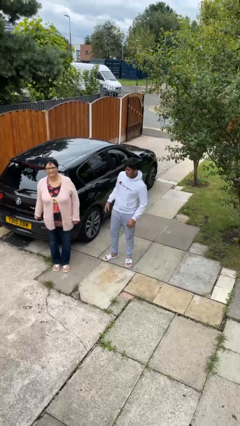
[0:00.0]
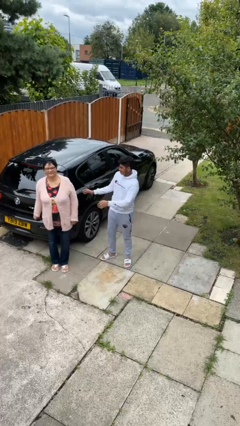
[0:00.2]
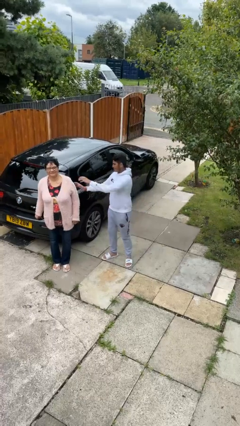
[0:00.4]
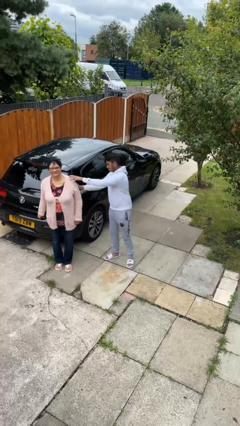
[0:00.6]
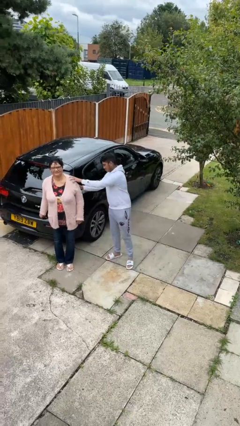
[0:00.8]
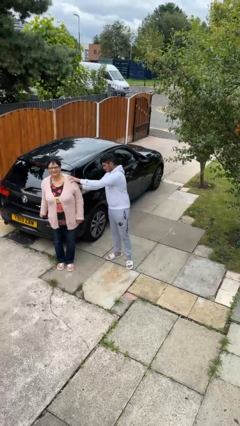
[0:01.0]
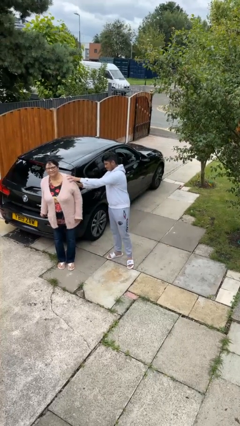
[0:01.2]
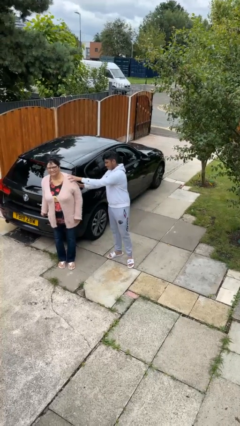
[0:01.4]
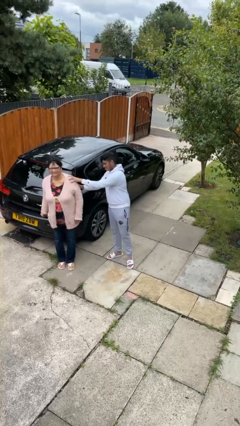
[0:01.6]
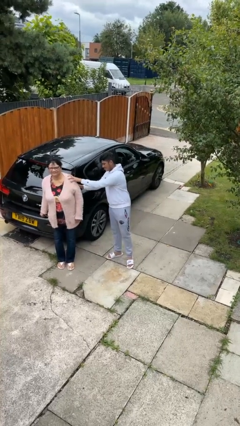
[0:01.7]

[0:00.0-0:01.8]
person shoves person

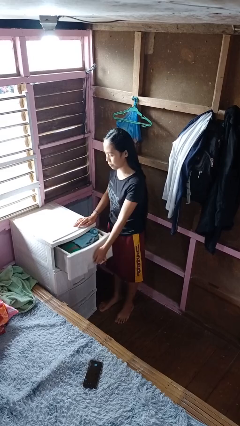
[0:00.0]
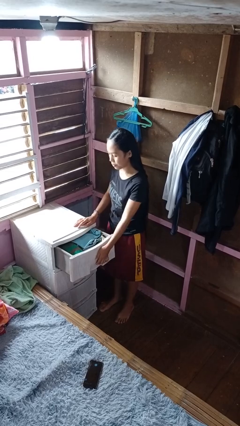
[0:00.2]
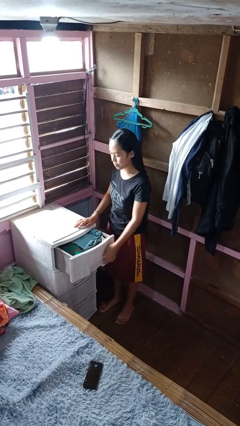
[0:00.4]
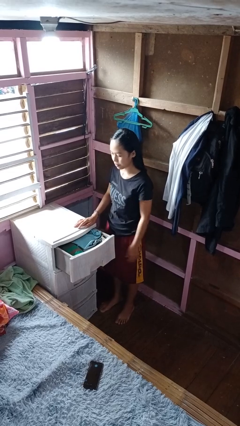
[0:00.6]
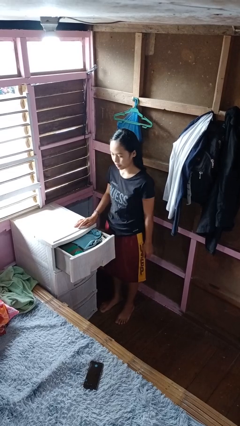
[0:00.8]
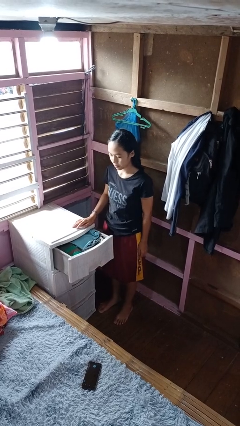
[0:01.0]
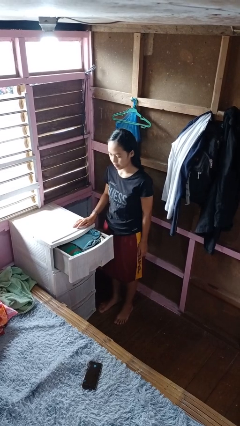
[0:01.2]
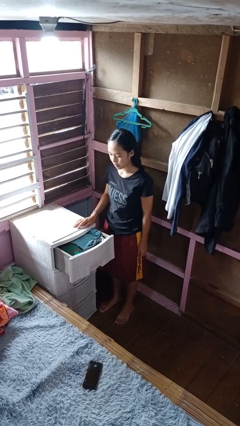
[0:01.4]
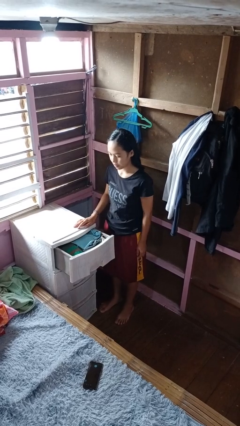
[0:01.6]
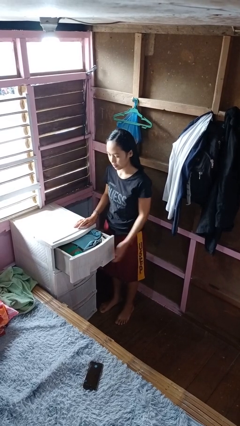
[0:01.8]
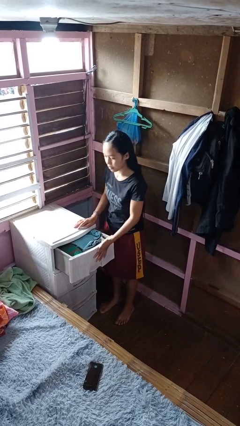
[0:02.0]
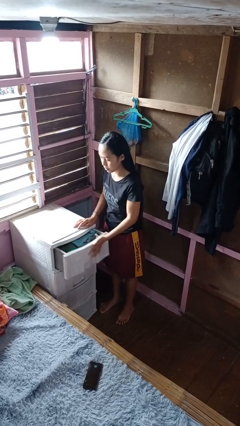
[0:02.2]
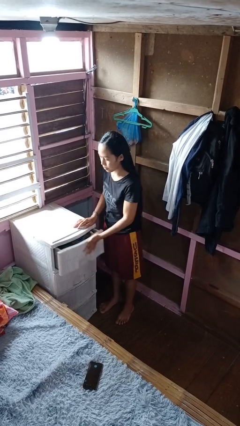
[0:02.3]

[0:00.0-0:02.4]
person opens dresser drawer

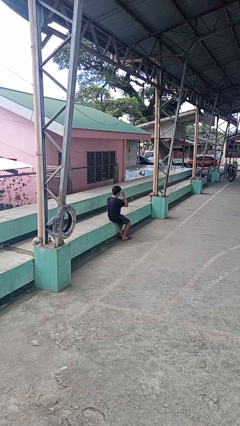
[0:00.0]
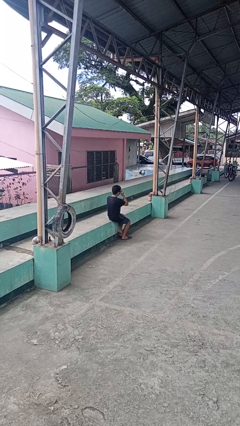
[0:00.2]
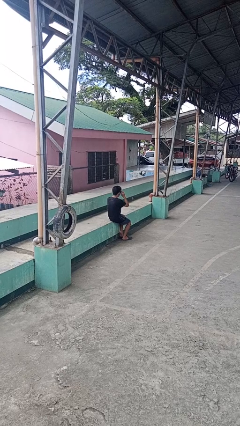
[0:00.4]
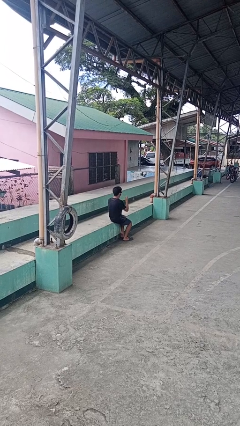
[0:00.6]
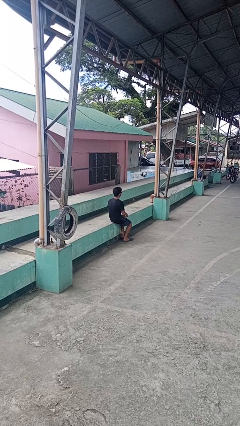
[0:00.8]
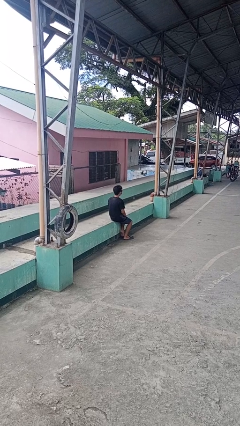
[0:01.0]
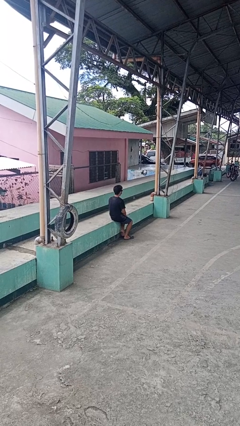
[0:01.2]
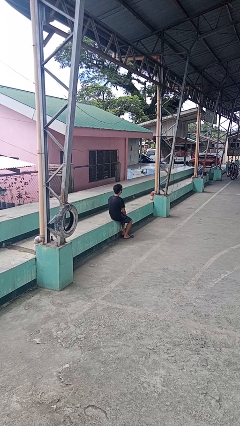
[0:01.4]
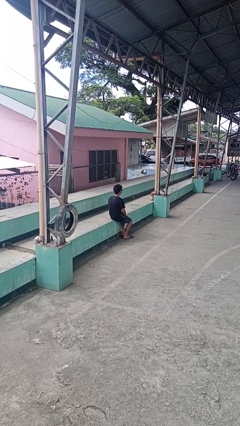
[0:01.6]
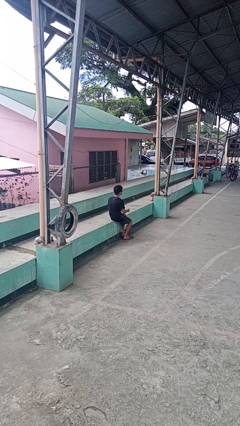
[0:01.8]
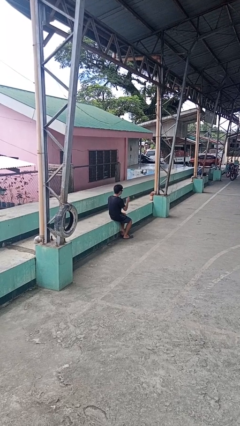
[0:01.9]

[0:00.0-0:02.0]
person puts on sunglasses

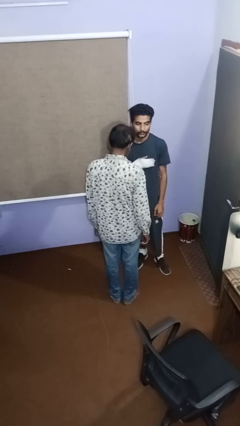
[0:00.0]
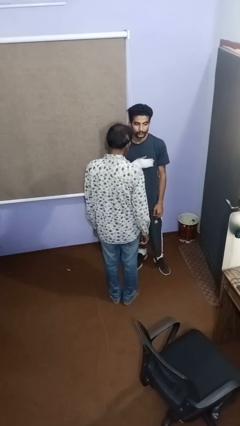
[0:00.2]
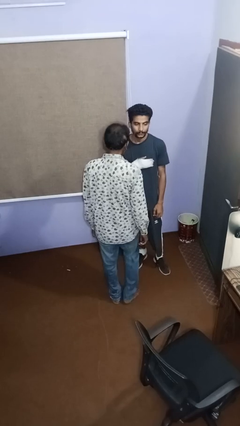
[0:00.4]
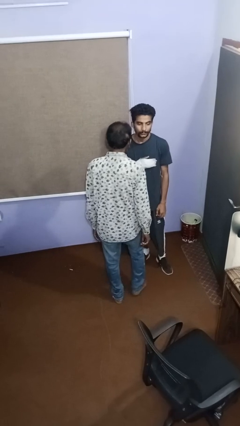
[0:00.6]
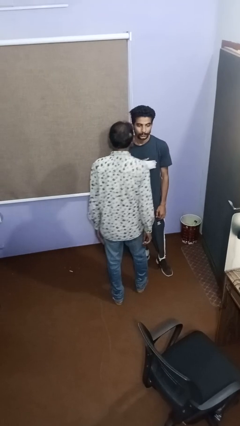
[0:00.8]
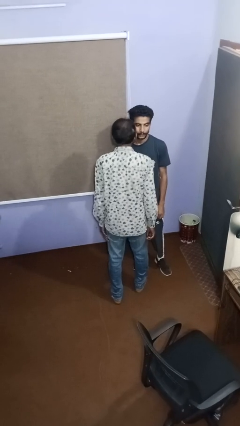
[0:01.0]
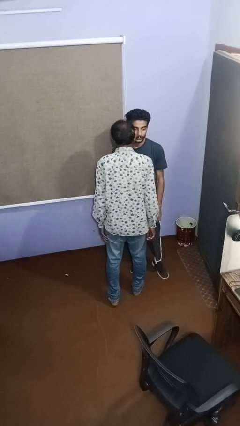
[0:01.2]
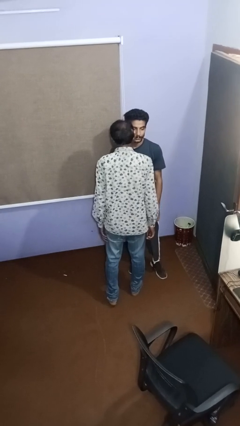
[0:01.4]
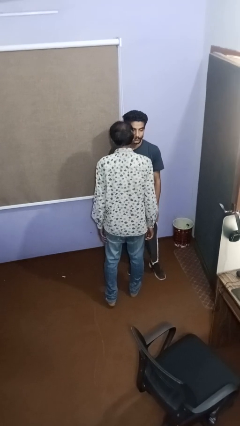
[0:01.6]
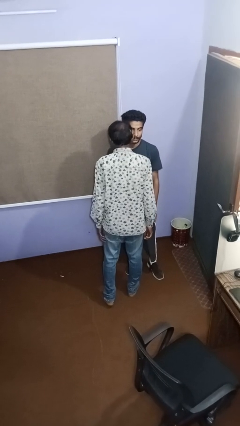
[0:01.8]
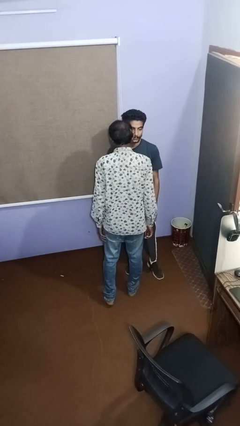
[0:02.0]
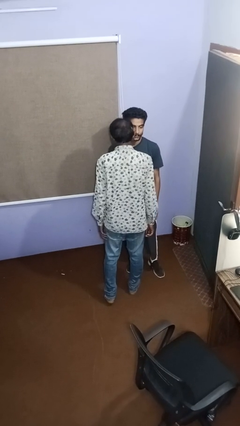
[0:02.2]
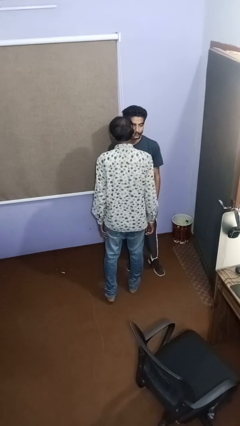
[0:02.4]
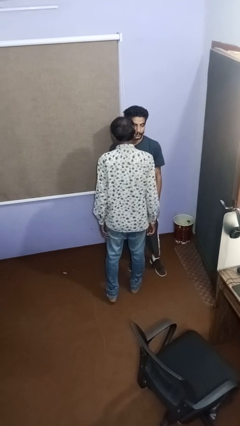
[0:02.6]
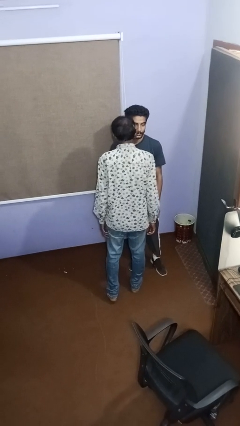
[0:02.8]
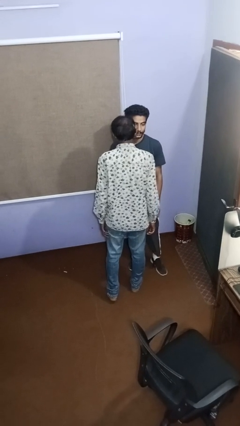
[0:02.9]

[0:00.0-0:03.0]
person kisses cheek of person

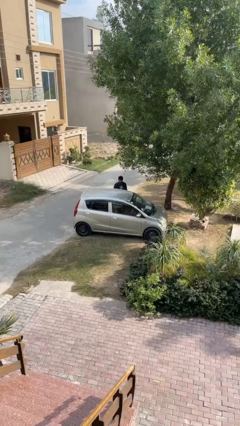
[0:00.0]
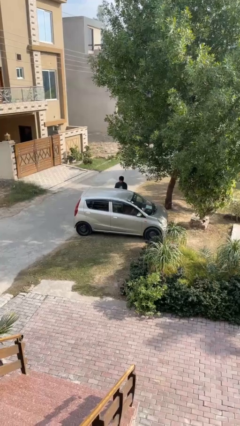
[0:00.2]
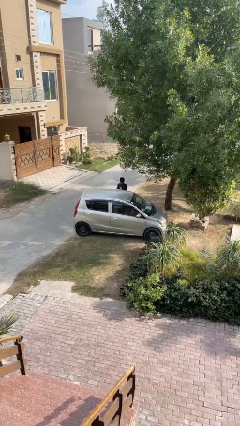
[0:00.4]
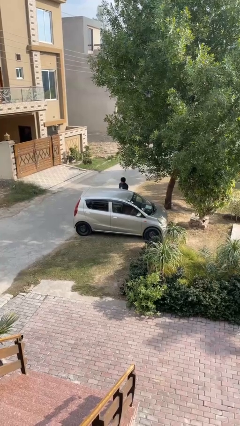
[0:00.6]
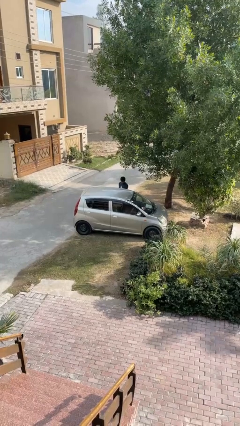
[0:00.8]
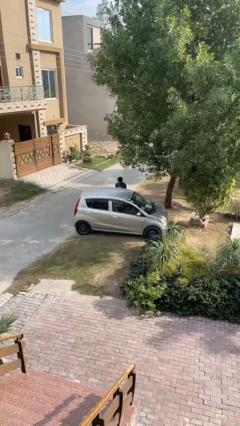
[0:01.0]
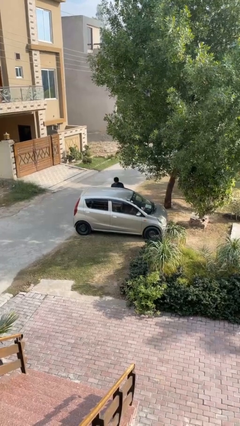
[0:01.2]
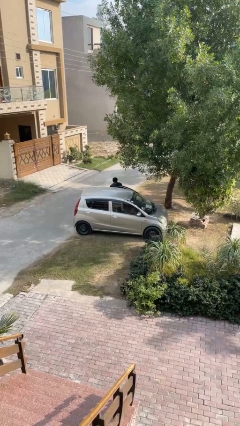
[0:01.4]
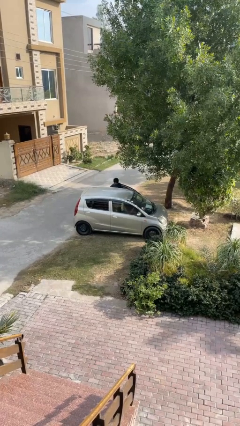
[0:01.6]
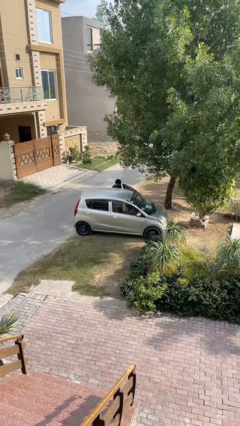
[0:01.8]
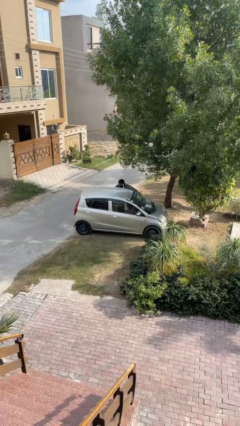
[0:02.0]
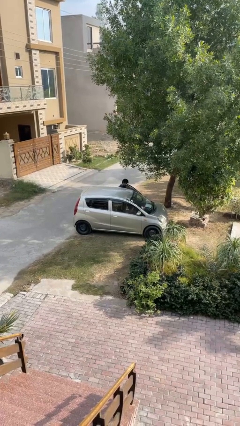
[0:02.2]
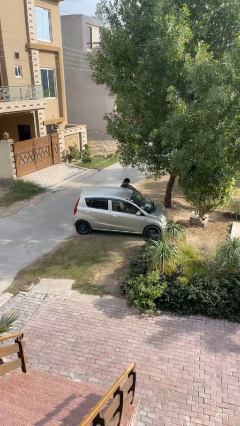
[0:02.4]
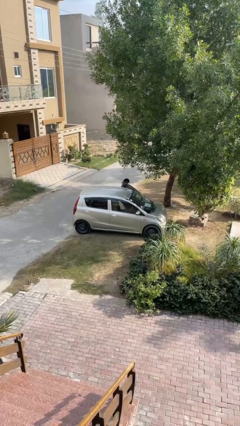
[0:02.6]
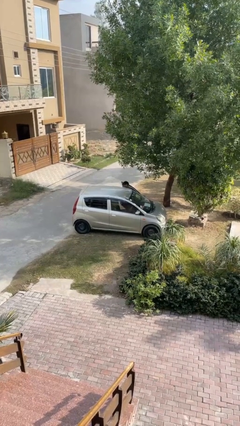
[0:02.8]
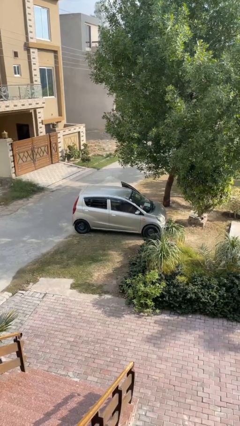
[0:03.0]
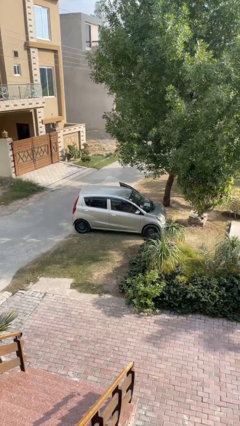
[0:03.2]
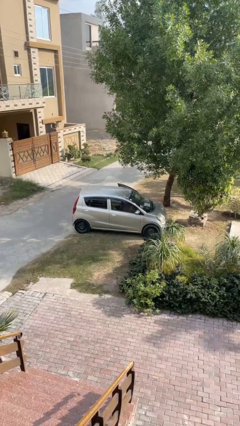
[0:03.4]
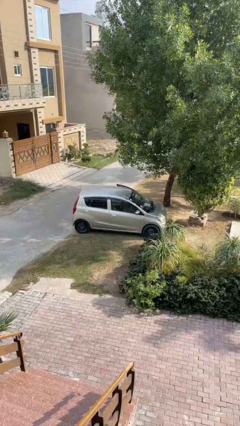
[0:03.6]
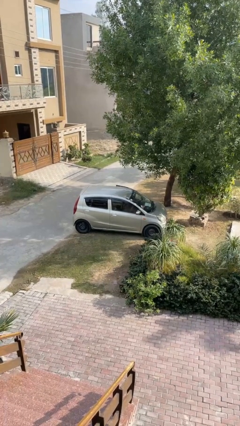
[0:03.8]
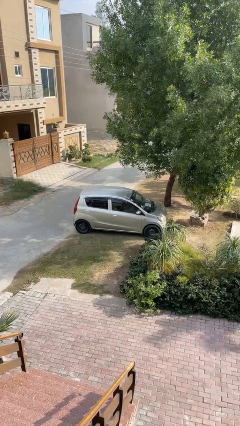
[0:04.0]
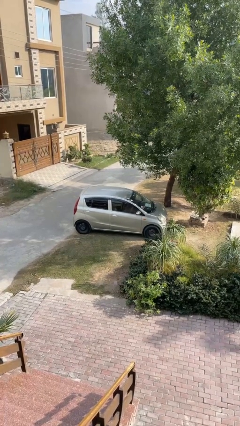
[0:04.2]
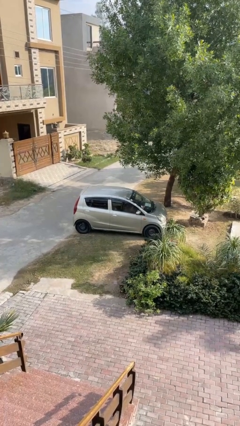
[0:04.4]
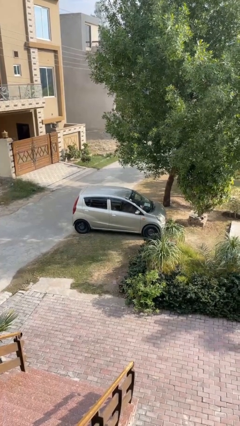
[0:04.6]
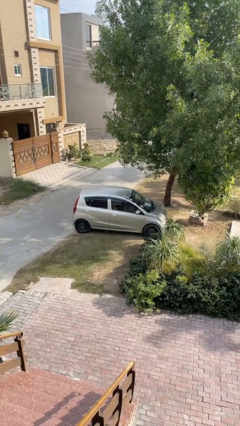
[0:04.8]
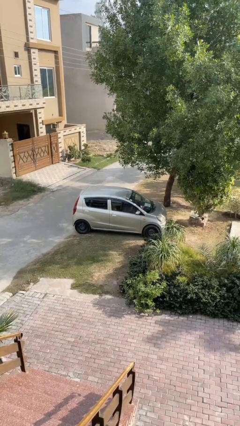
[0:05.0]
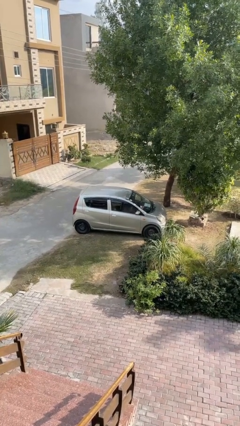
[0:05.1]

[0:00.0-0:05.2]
car picks up person

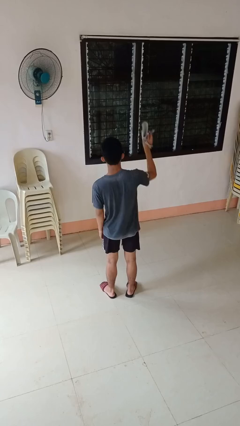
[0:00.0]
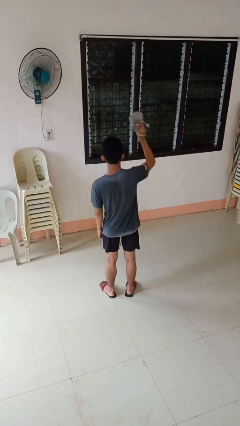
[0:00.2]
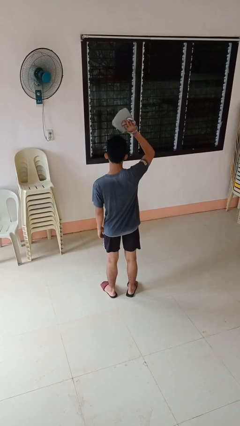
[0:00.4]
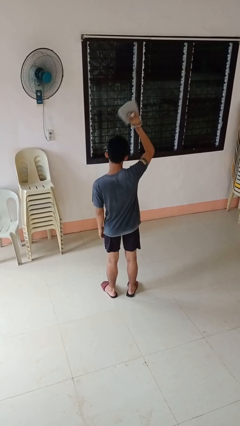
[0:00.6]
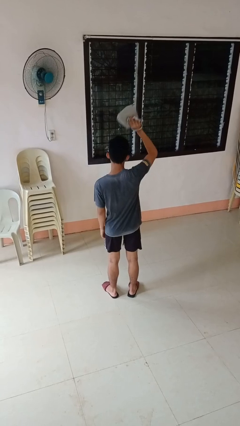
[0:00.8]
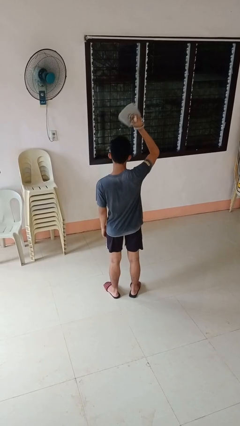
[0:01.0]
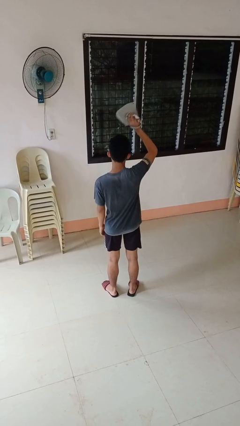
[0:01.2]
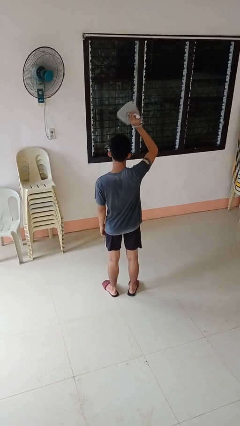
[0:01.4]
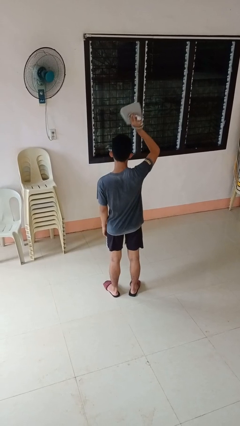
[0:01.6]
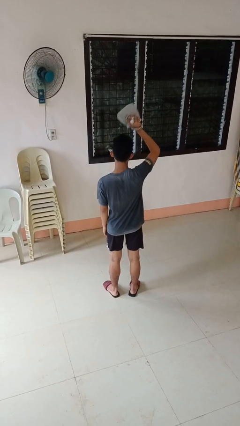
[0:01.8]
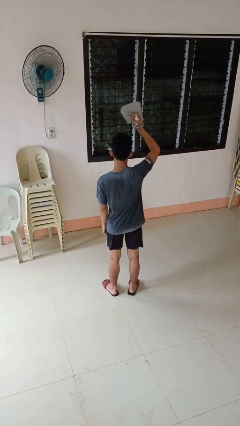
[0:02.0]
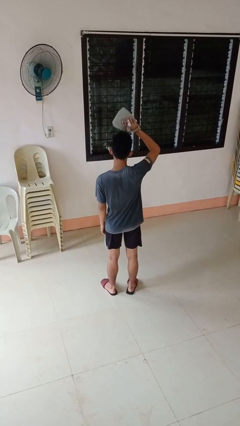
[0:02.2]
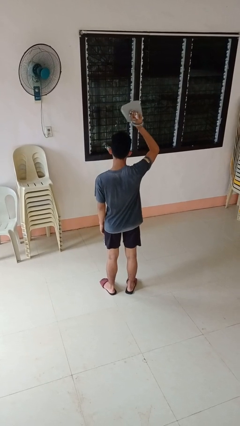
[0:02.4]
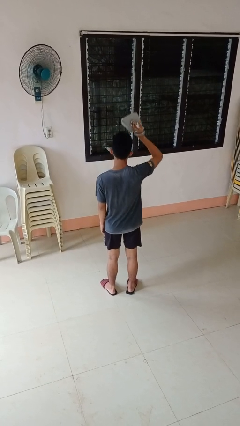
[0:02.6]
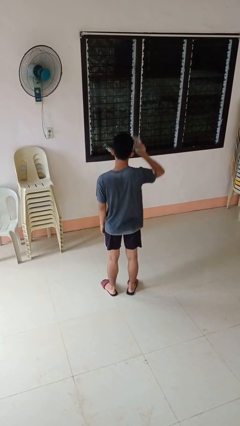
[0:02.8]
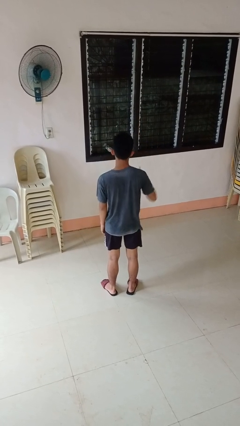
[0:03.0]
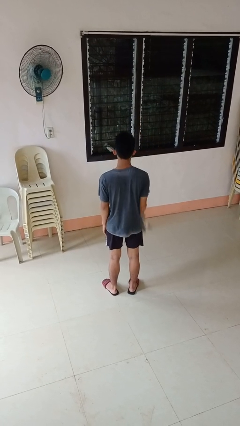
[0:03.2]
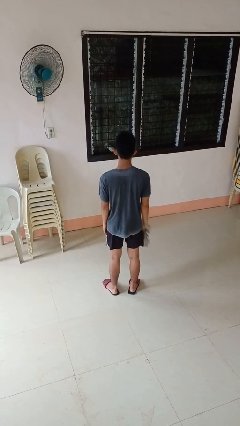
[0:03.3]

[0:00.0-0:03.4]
person holds object above head
